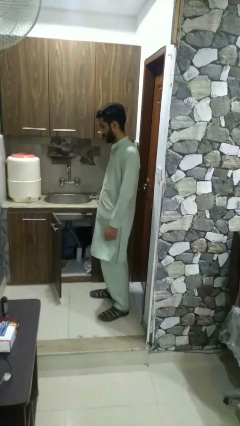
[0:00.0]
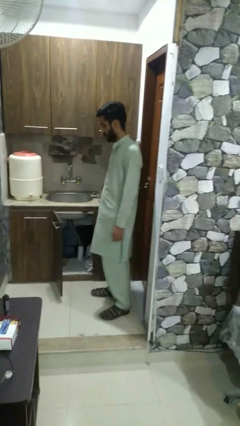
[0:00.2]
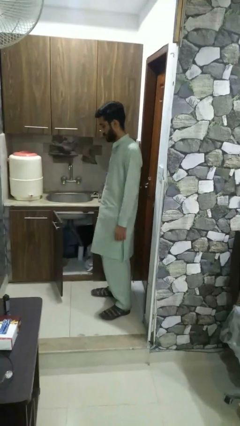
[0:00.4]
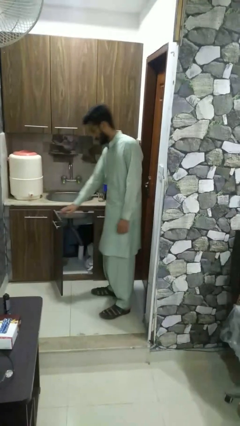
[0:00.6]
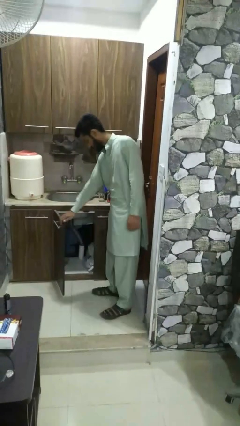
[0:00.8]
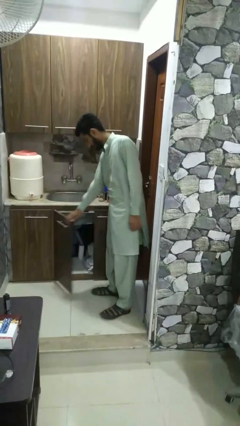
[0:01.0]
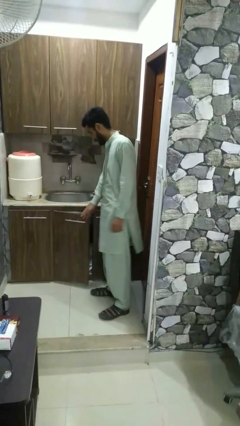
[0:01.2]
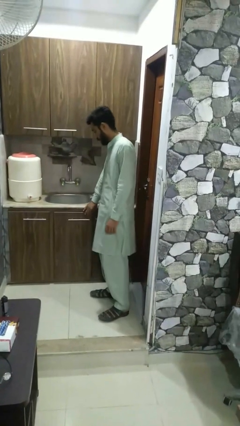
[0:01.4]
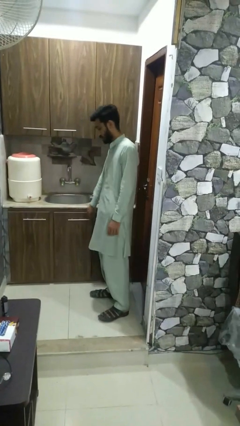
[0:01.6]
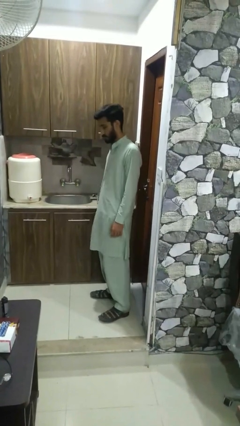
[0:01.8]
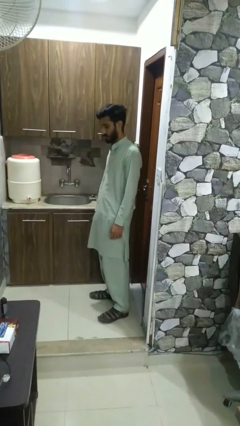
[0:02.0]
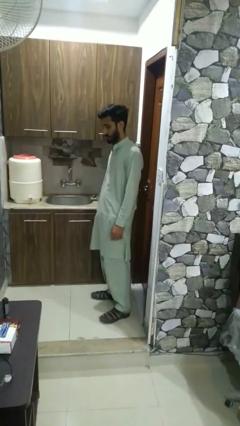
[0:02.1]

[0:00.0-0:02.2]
person closes closet door

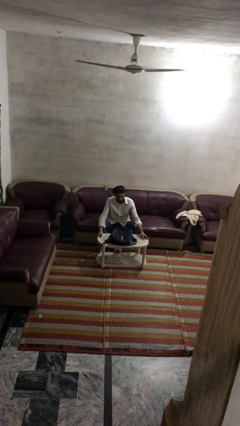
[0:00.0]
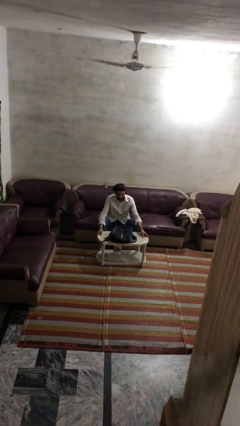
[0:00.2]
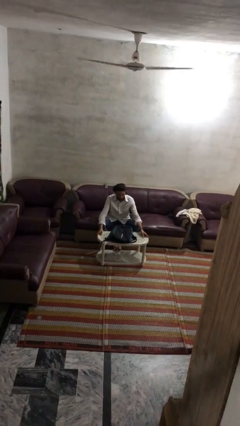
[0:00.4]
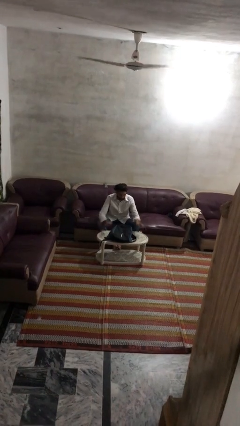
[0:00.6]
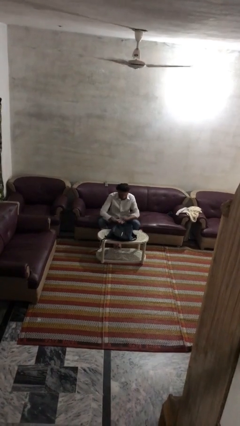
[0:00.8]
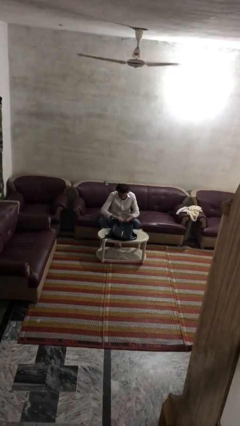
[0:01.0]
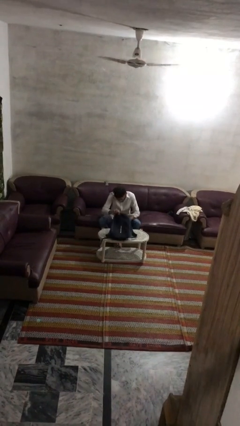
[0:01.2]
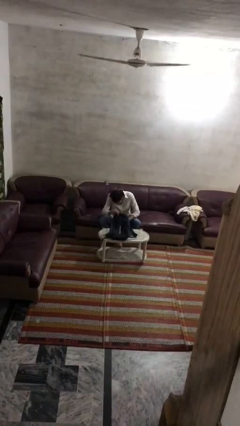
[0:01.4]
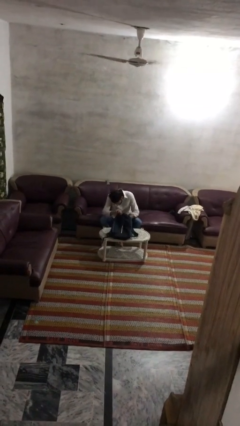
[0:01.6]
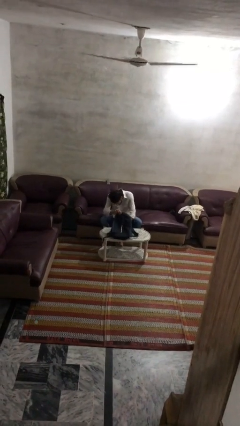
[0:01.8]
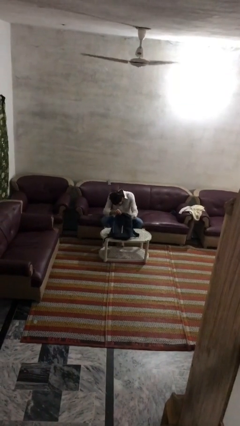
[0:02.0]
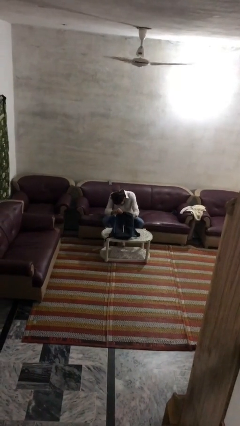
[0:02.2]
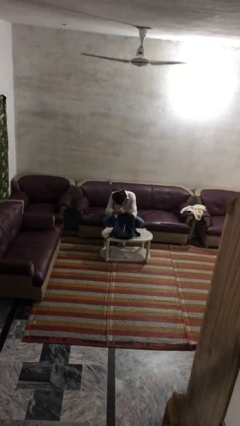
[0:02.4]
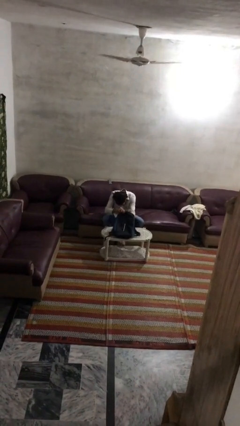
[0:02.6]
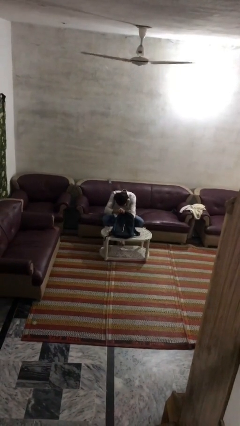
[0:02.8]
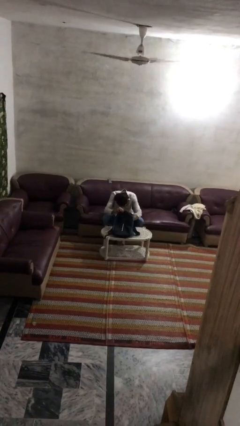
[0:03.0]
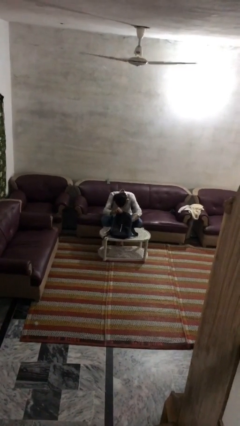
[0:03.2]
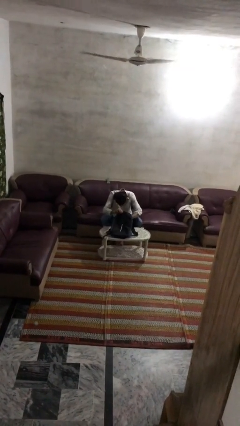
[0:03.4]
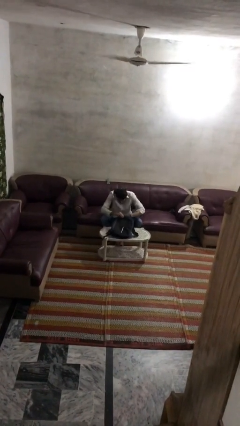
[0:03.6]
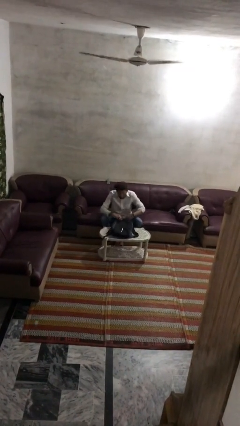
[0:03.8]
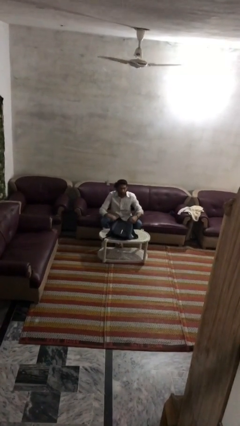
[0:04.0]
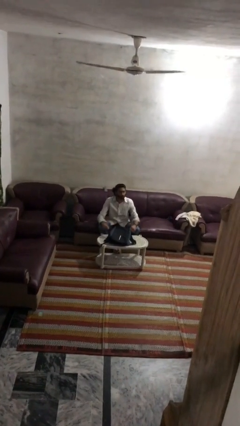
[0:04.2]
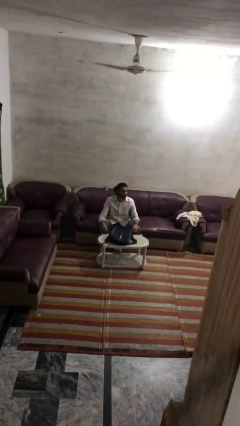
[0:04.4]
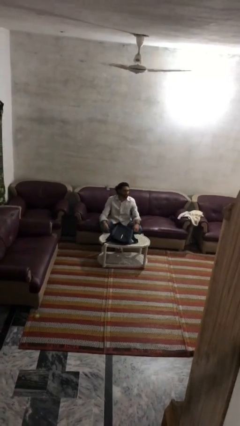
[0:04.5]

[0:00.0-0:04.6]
person searches in bag

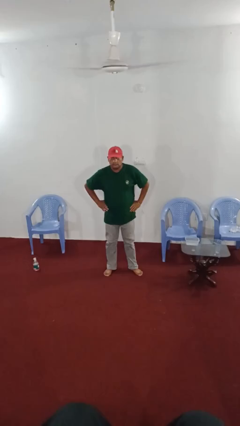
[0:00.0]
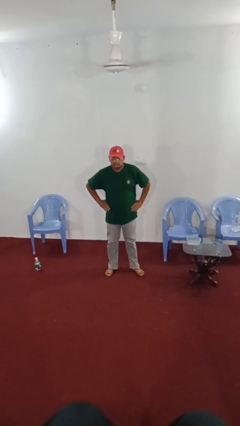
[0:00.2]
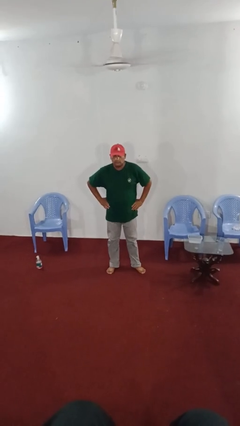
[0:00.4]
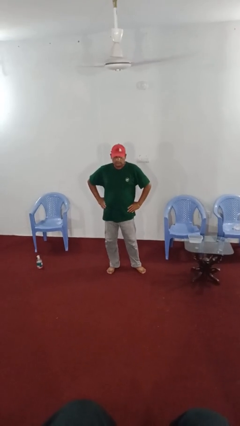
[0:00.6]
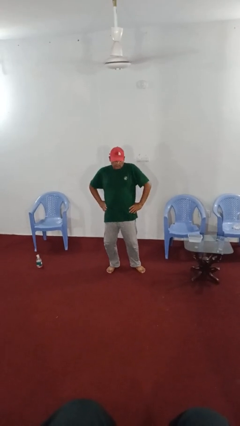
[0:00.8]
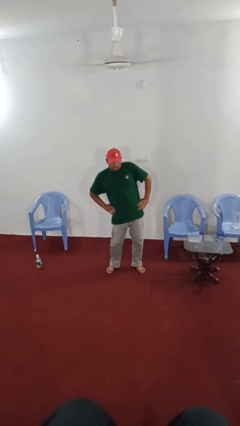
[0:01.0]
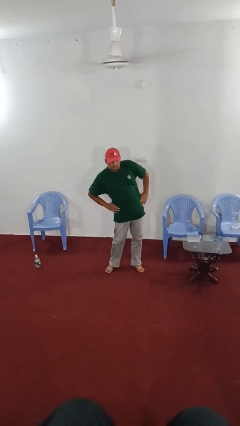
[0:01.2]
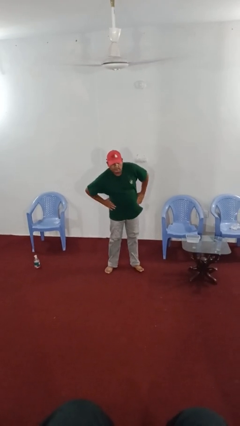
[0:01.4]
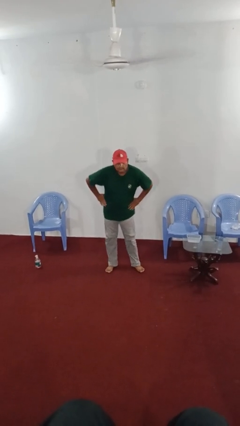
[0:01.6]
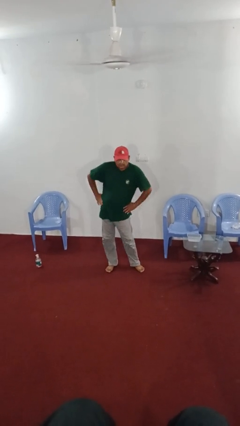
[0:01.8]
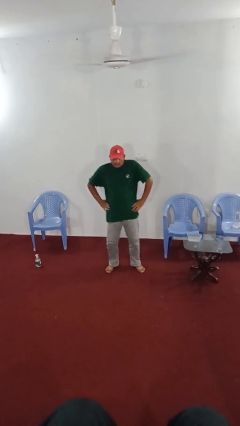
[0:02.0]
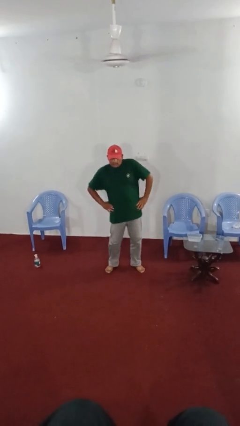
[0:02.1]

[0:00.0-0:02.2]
person wiggles hips

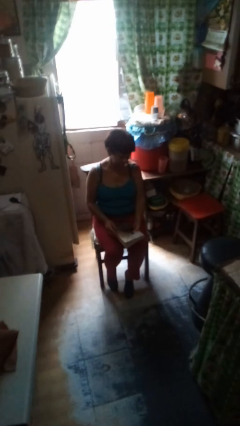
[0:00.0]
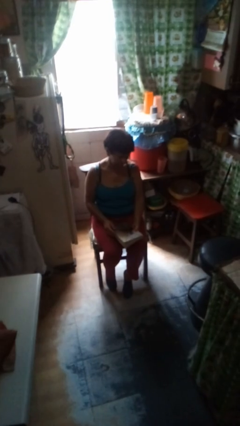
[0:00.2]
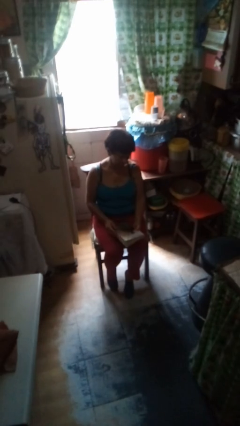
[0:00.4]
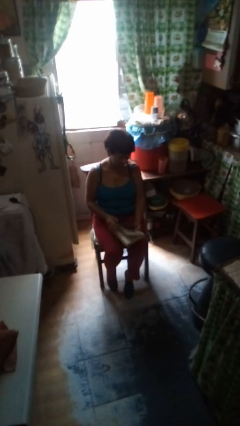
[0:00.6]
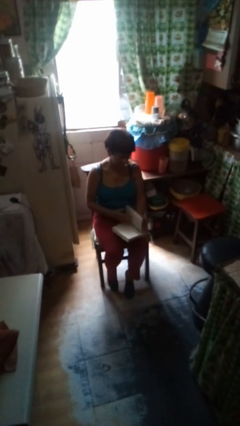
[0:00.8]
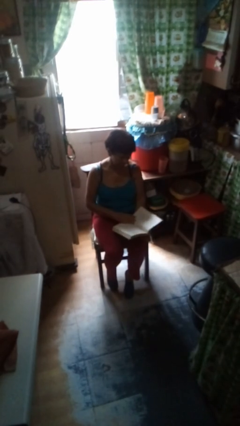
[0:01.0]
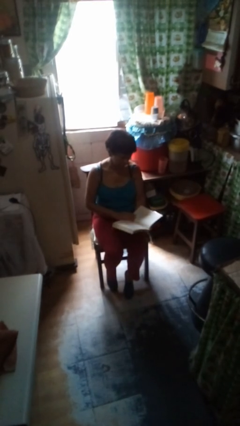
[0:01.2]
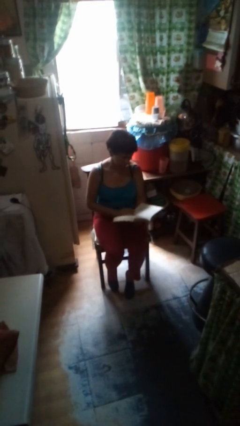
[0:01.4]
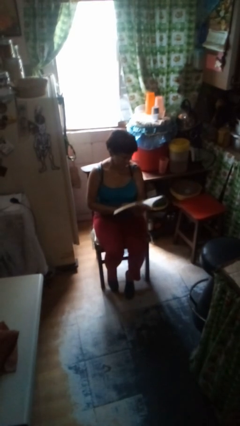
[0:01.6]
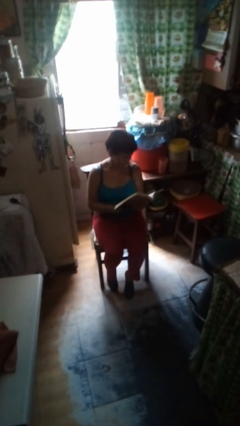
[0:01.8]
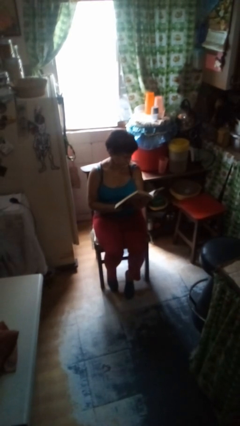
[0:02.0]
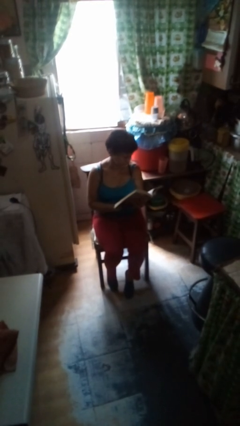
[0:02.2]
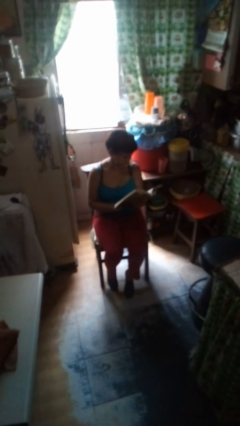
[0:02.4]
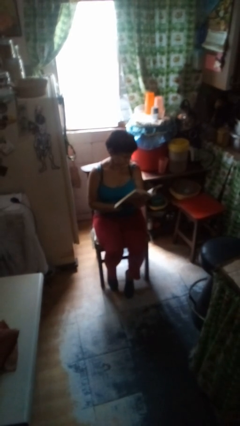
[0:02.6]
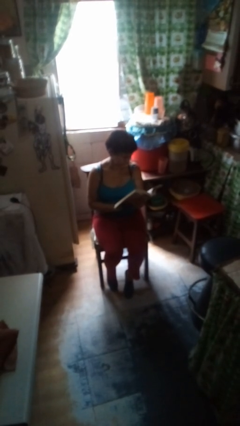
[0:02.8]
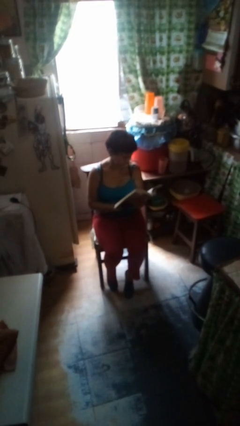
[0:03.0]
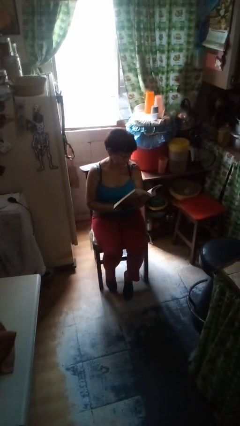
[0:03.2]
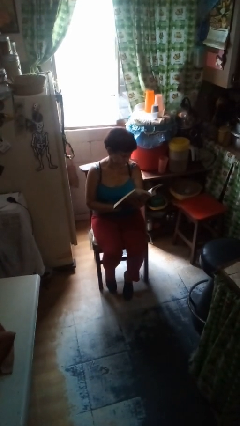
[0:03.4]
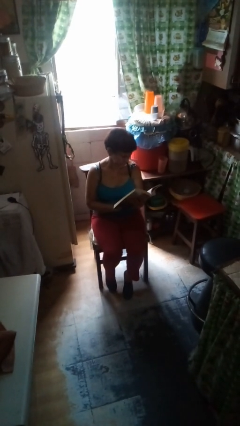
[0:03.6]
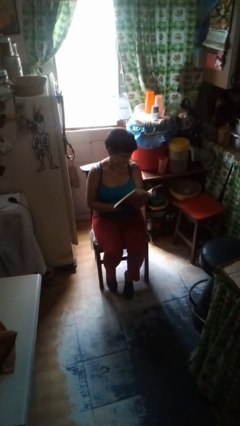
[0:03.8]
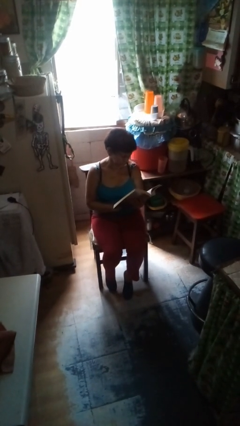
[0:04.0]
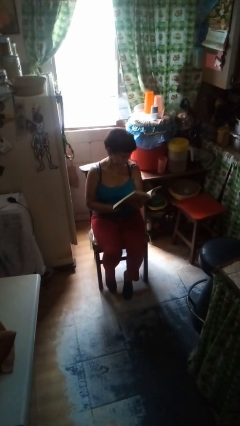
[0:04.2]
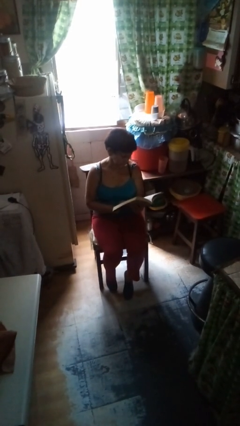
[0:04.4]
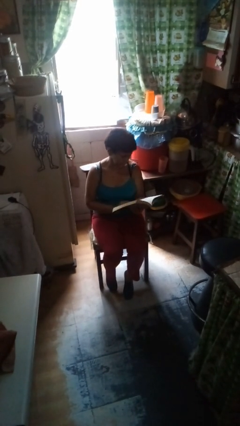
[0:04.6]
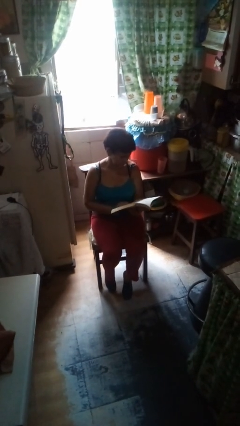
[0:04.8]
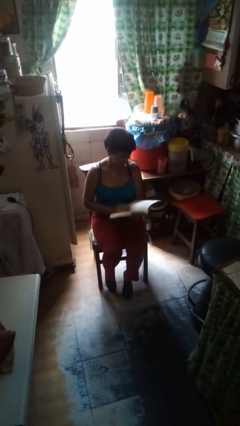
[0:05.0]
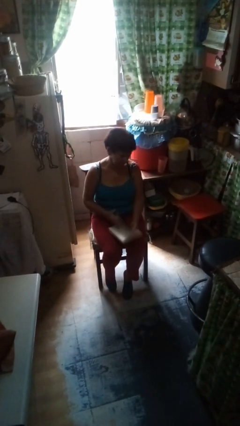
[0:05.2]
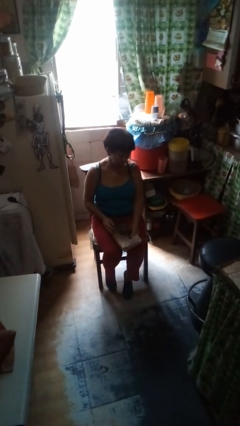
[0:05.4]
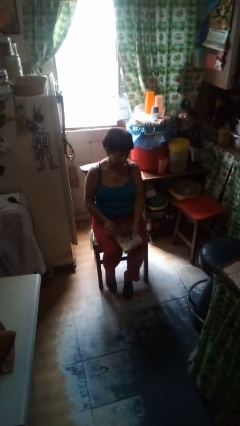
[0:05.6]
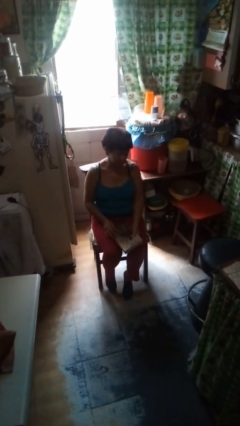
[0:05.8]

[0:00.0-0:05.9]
person reads book

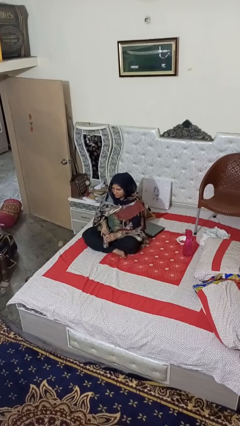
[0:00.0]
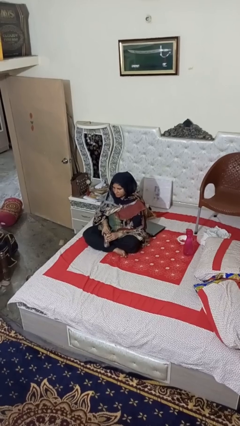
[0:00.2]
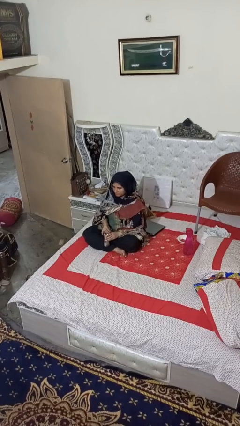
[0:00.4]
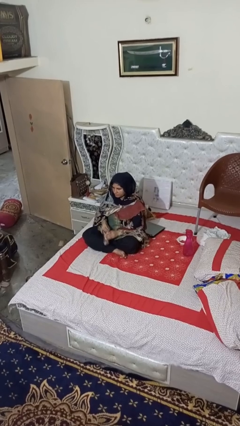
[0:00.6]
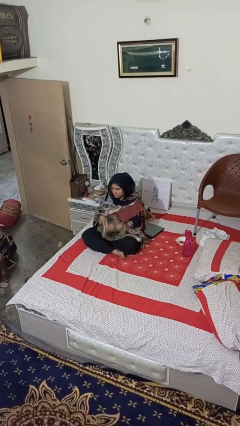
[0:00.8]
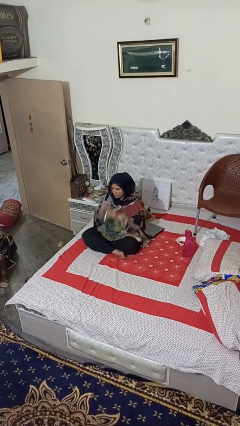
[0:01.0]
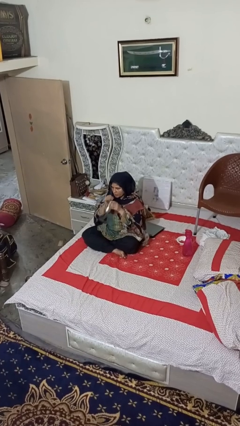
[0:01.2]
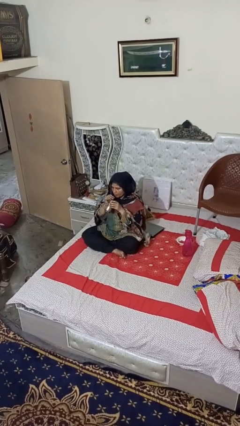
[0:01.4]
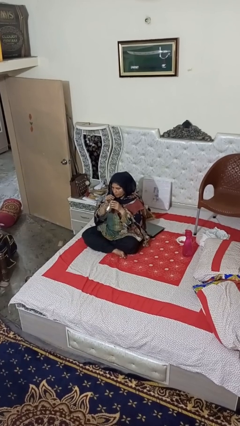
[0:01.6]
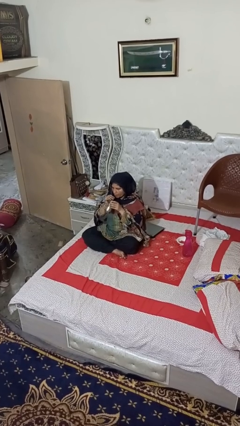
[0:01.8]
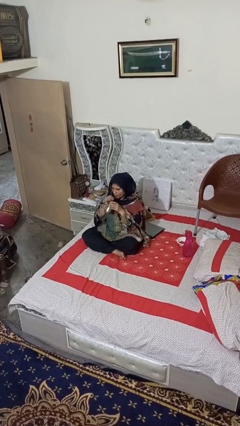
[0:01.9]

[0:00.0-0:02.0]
person drinks from straw

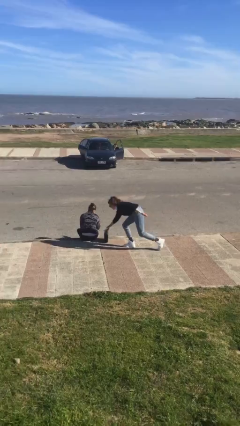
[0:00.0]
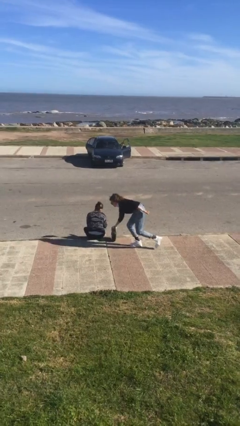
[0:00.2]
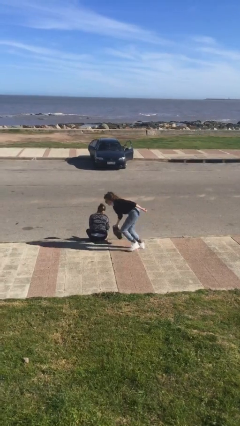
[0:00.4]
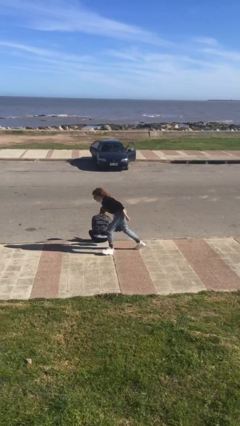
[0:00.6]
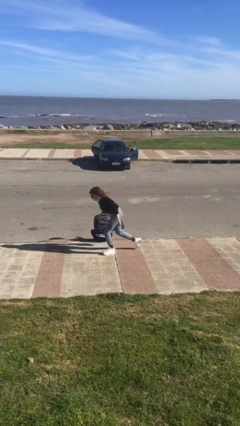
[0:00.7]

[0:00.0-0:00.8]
person steals object from person
